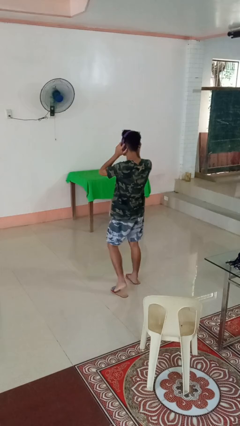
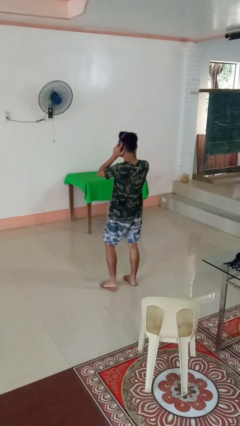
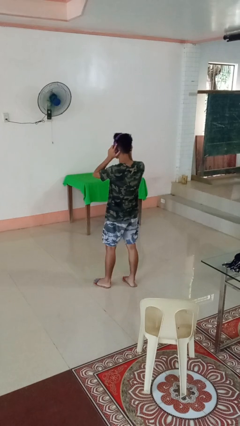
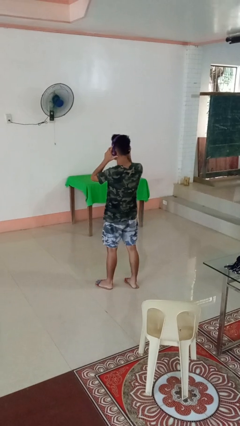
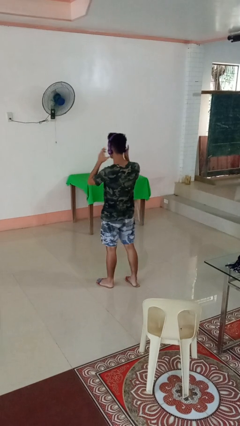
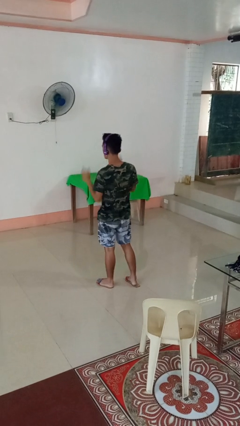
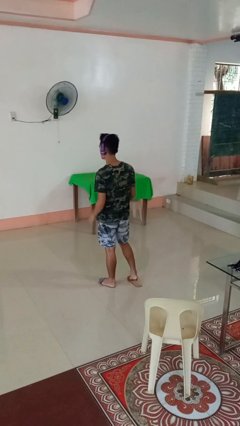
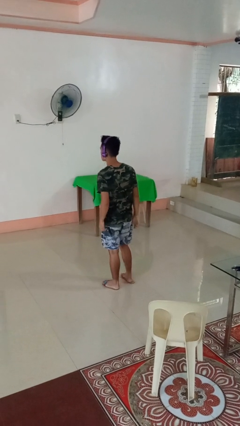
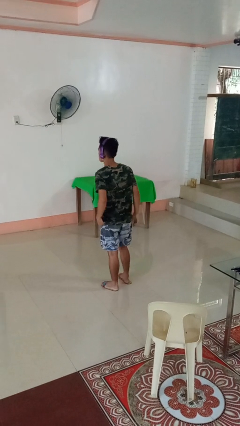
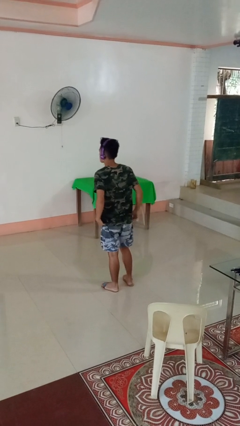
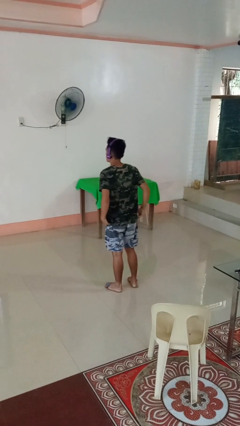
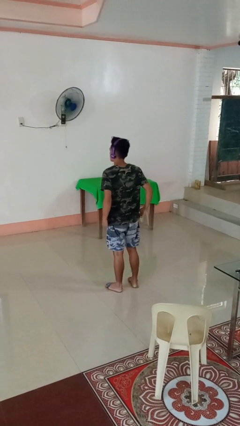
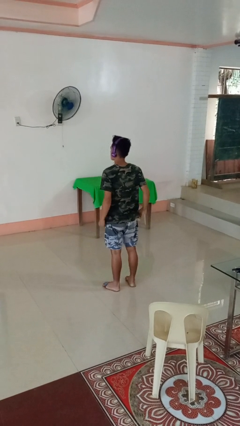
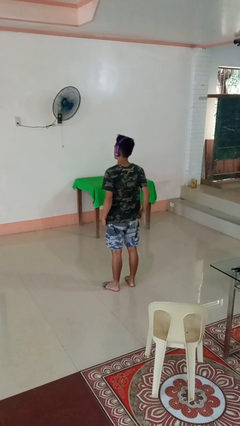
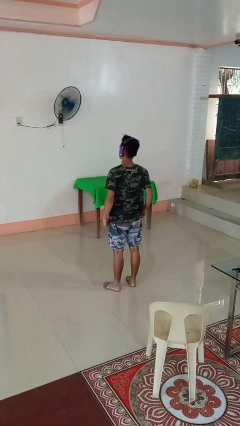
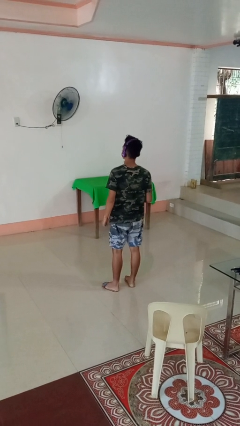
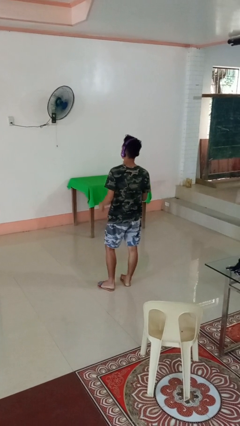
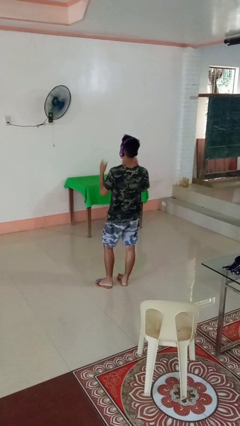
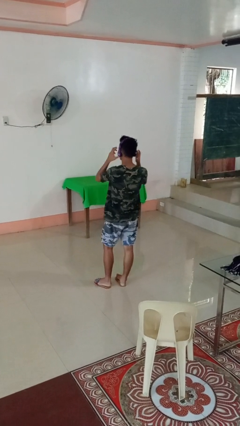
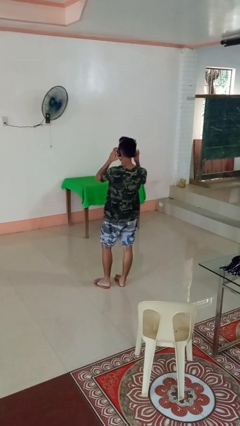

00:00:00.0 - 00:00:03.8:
person puts on headphones

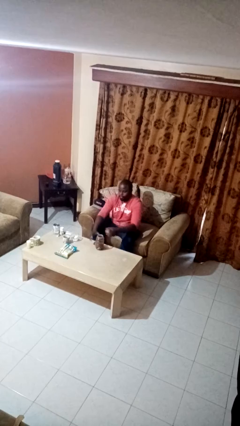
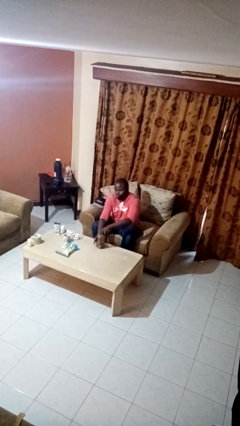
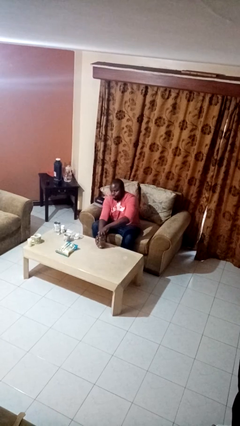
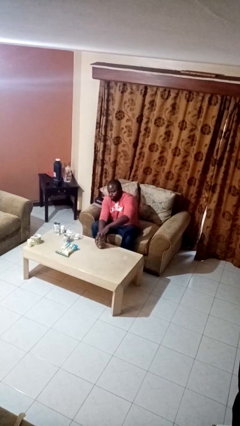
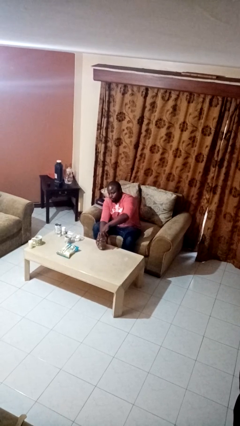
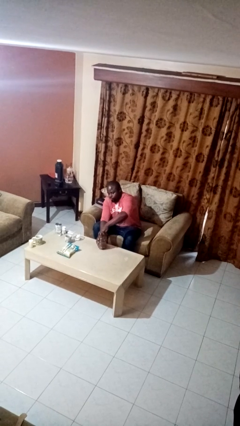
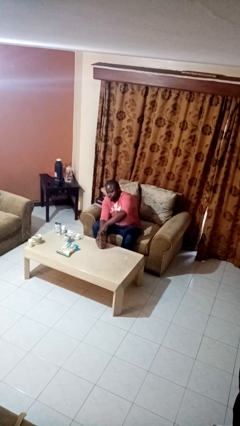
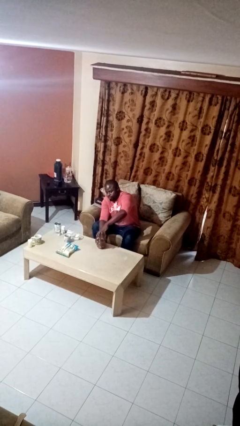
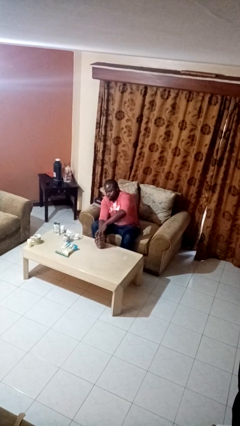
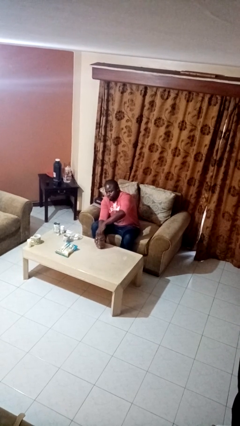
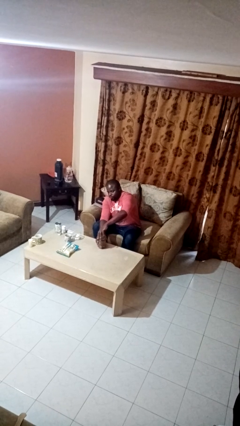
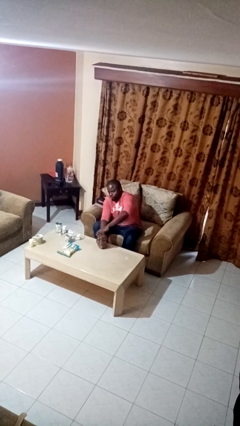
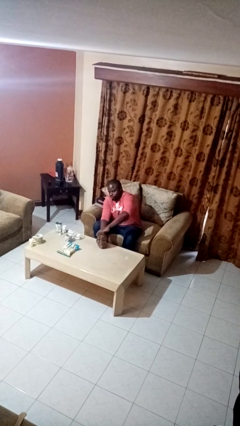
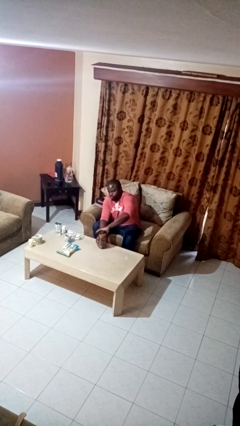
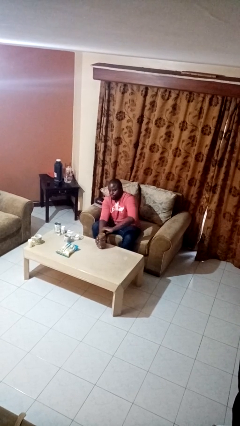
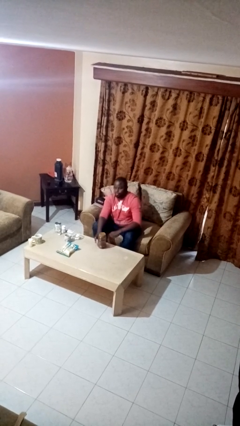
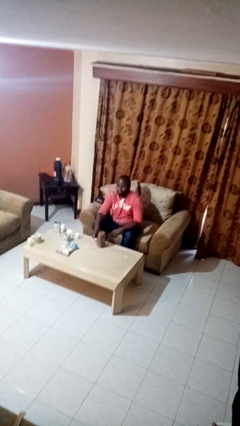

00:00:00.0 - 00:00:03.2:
person closes jar

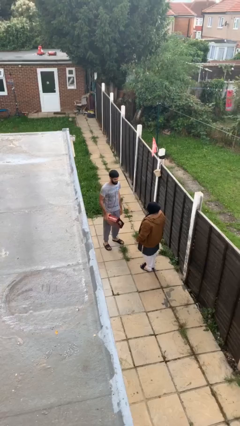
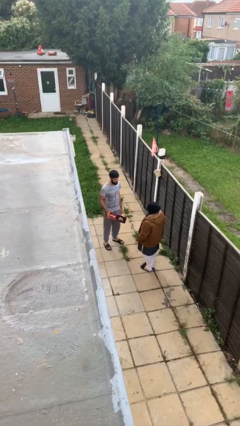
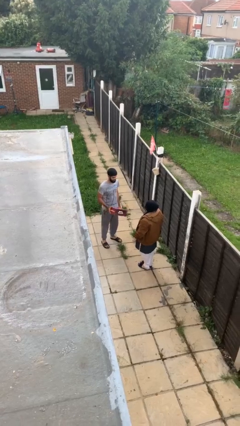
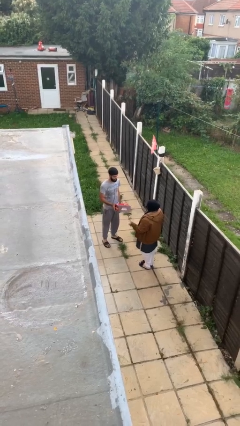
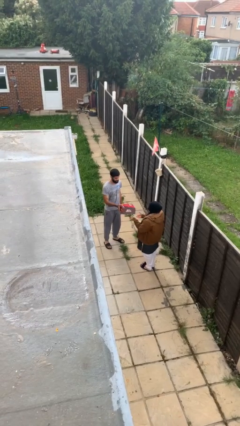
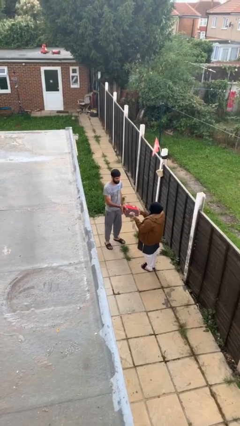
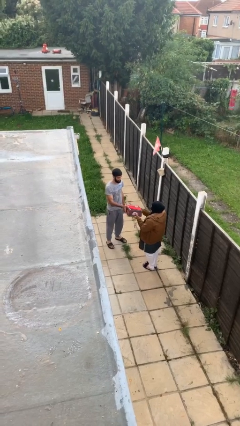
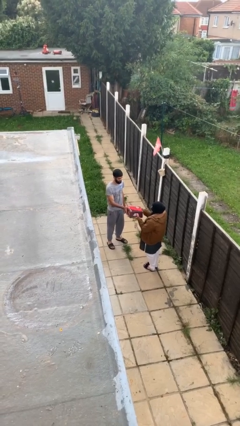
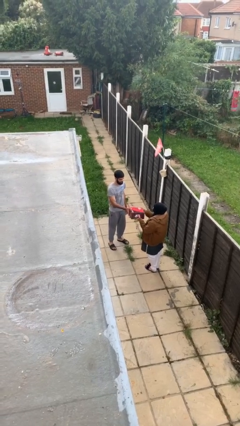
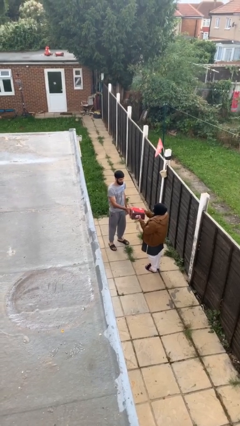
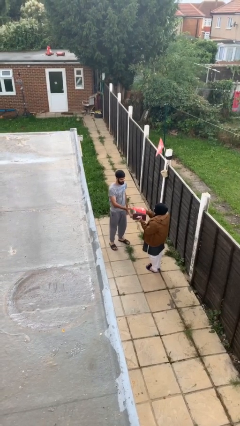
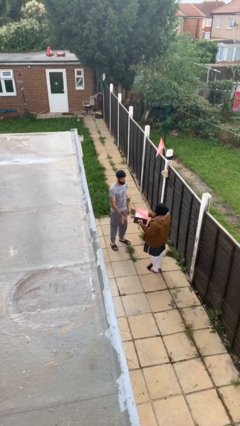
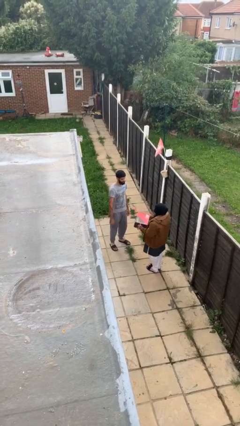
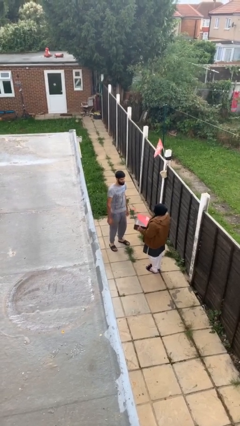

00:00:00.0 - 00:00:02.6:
person transfers object to person

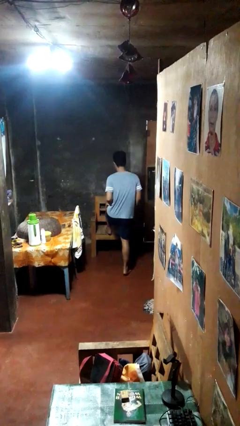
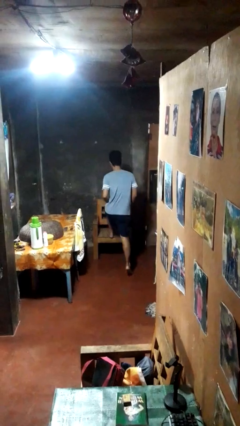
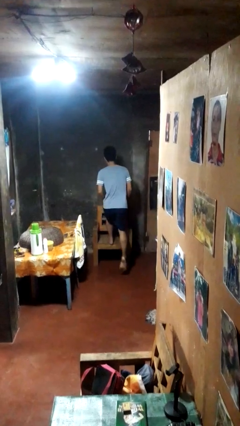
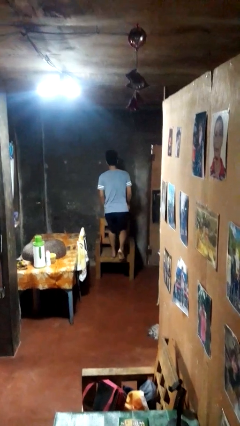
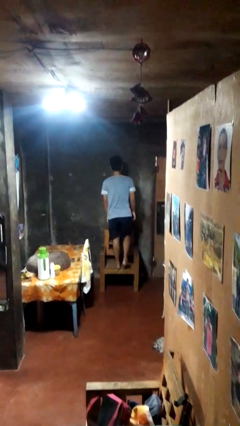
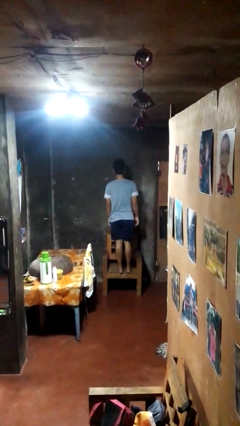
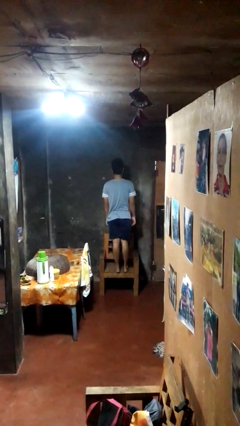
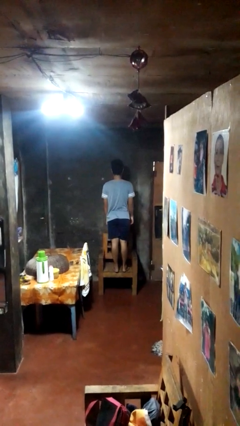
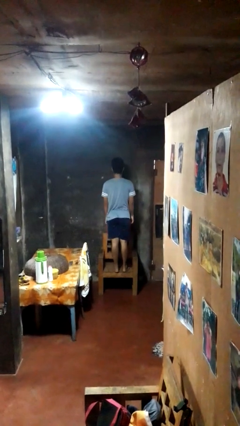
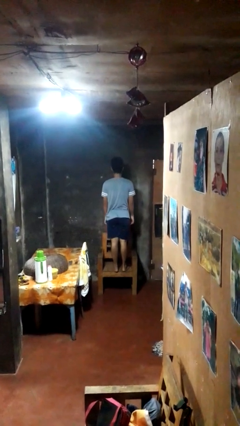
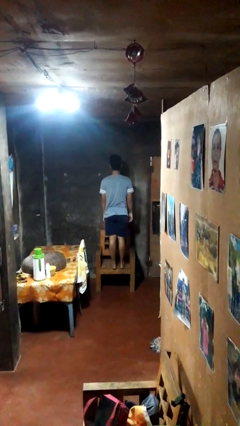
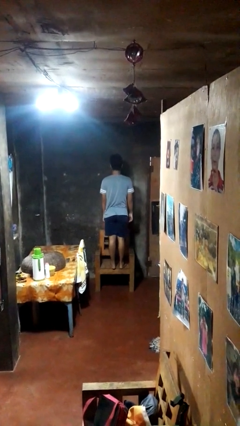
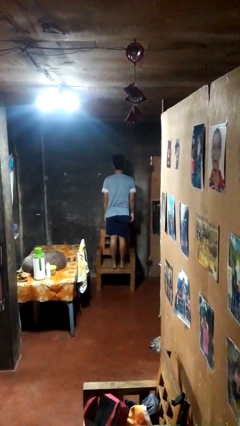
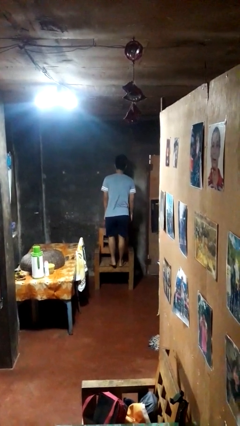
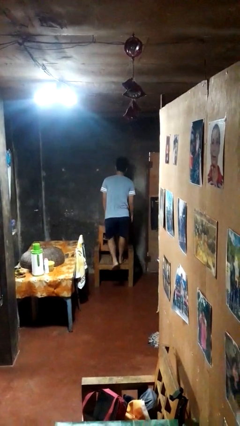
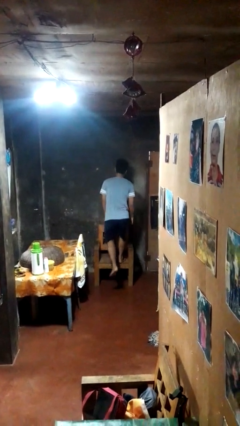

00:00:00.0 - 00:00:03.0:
person climbs on chair

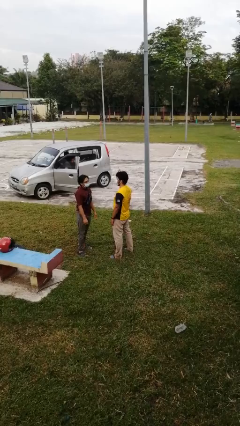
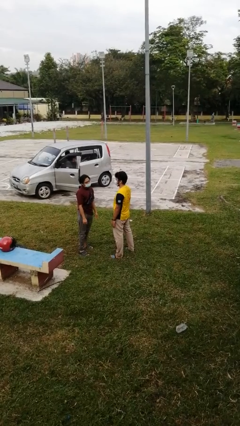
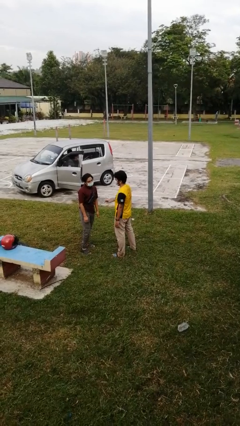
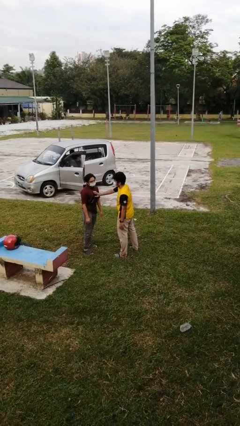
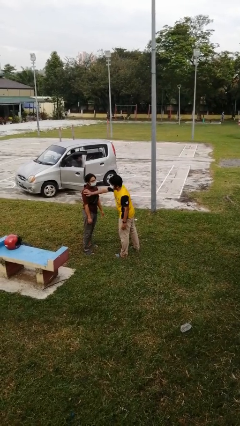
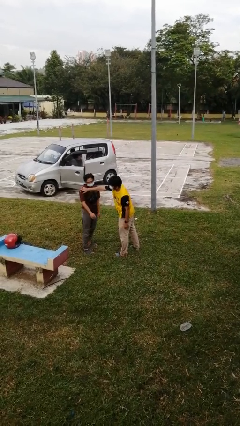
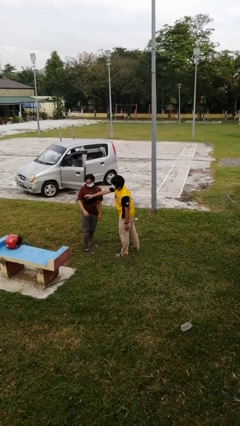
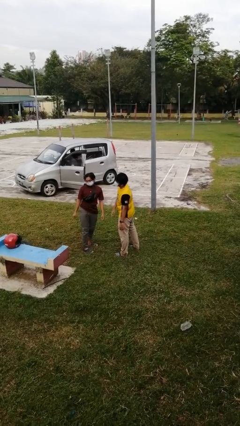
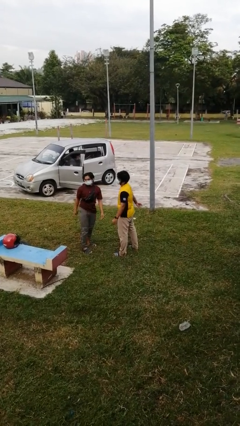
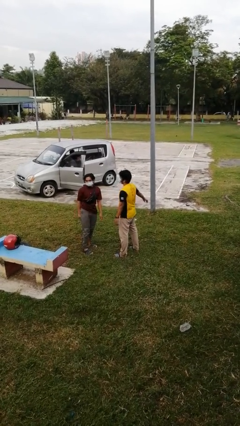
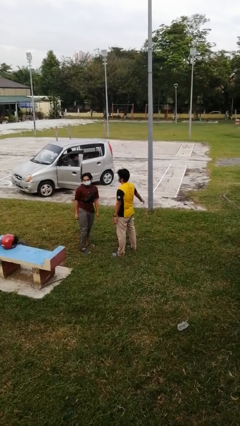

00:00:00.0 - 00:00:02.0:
person shoves person

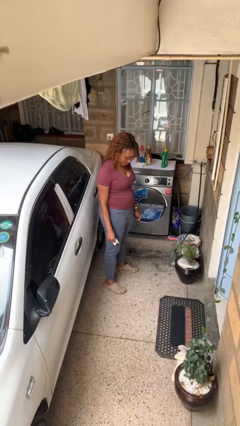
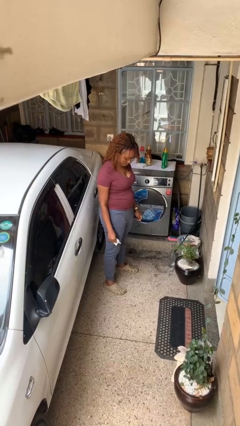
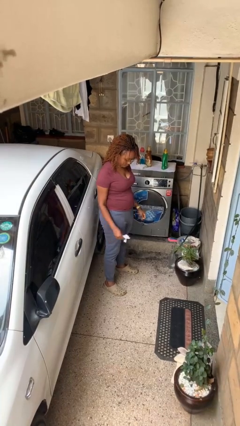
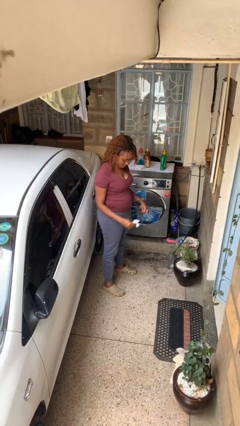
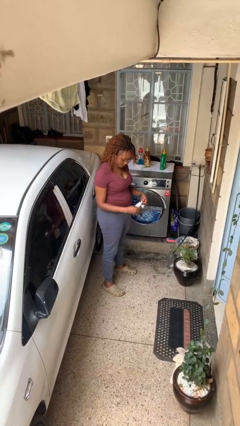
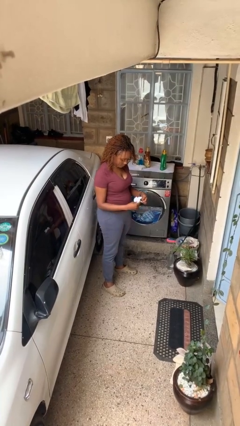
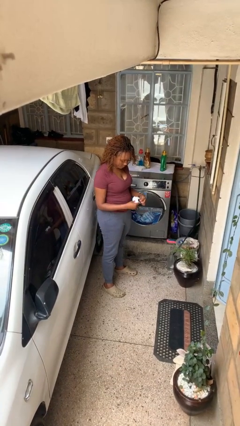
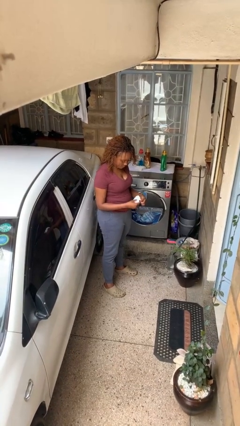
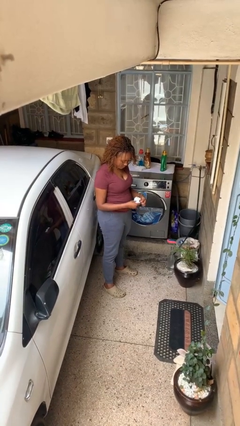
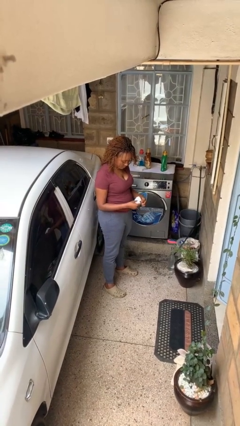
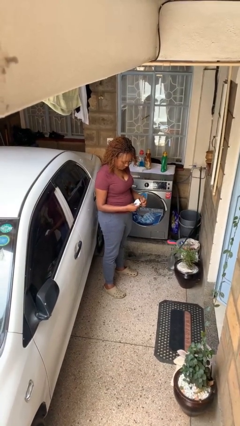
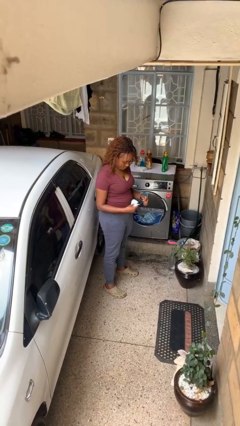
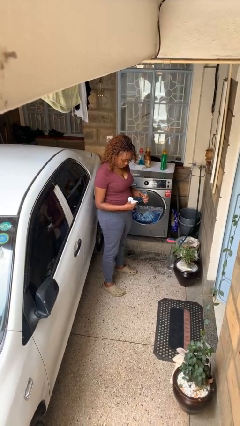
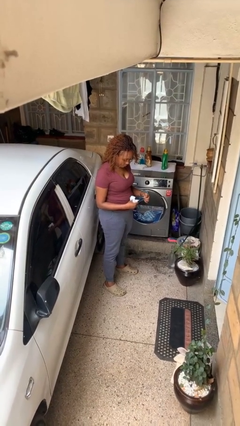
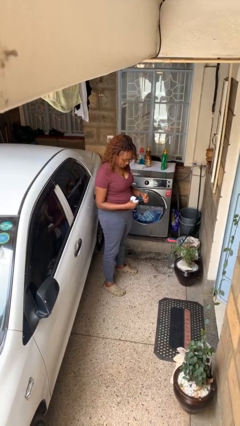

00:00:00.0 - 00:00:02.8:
person cleans eyeglasses
